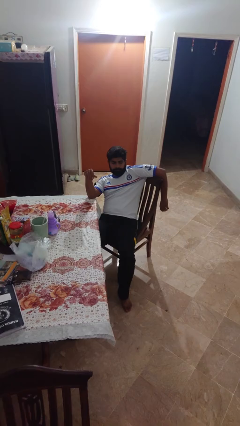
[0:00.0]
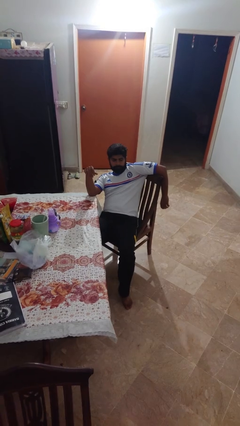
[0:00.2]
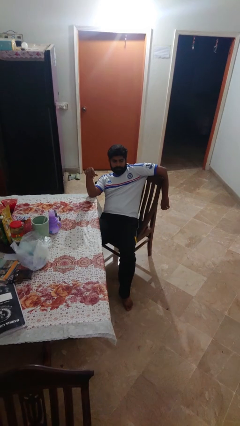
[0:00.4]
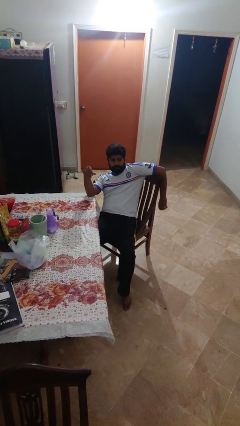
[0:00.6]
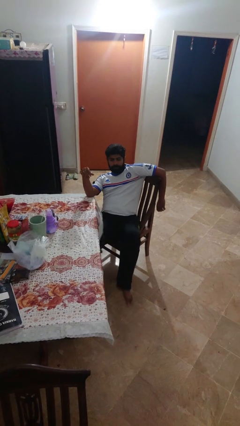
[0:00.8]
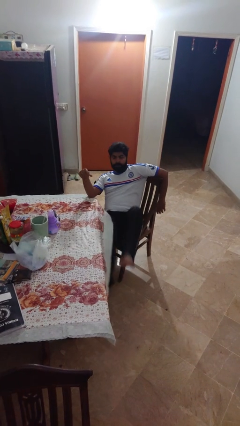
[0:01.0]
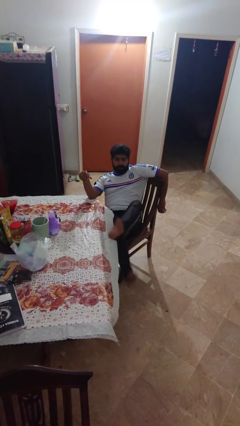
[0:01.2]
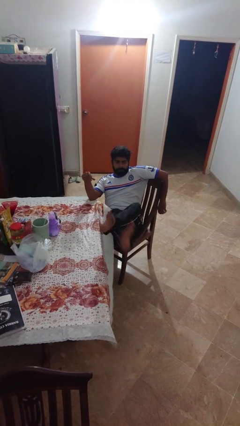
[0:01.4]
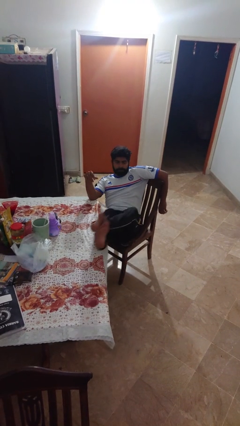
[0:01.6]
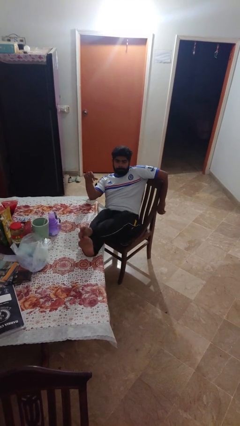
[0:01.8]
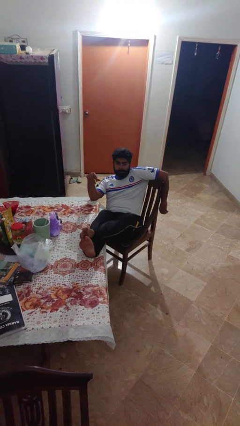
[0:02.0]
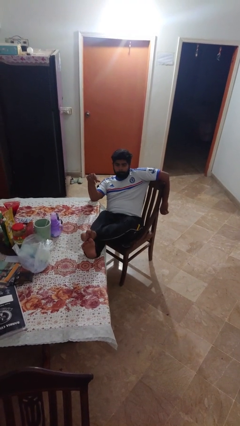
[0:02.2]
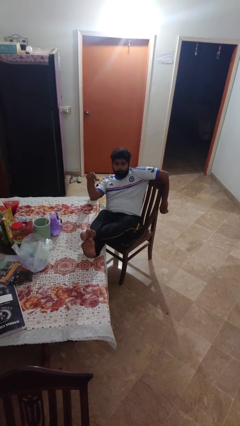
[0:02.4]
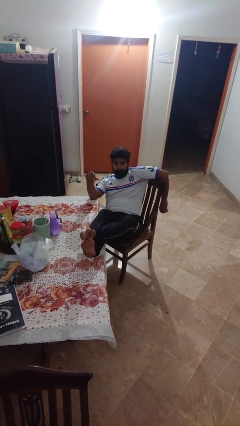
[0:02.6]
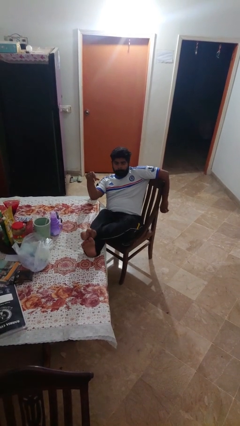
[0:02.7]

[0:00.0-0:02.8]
person puts feet up

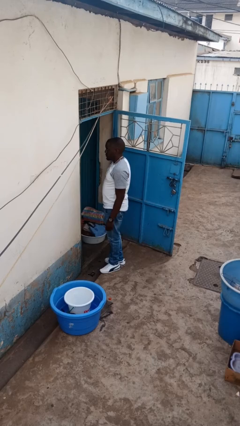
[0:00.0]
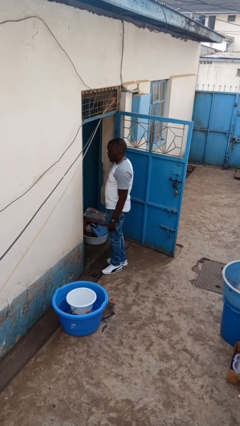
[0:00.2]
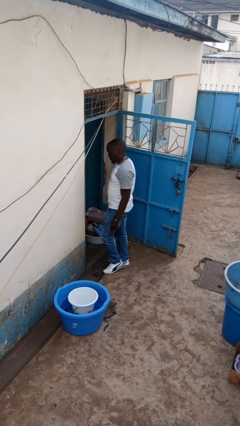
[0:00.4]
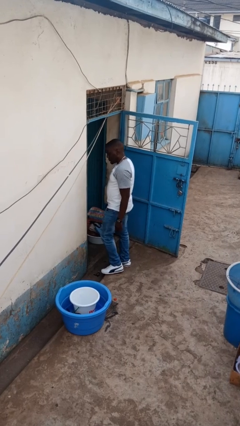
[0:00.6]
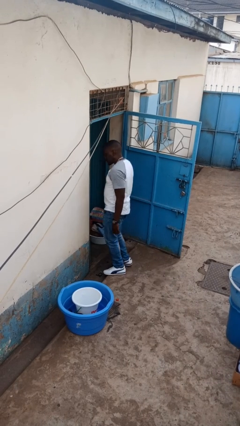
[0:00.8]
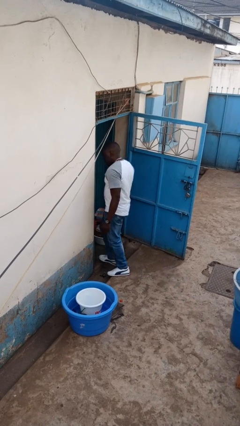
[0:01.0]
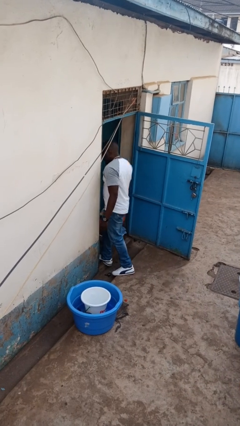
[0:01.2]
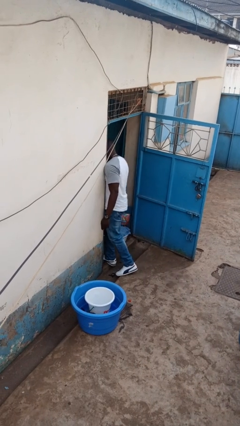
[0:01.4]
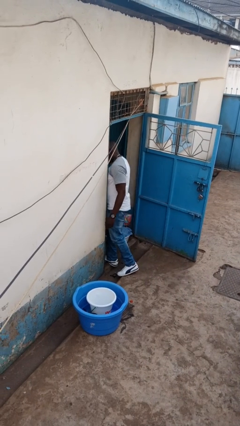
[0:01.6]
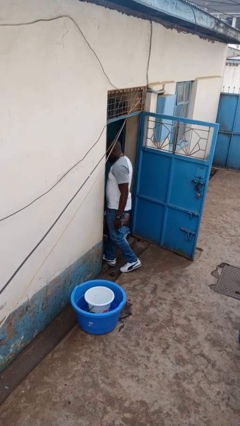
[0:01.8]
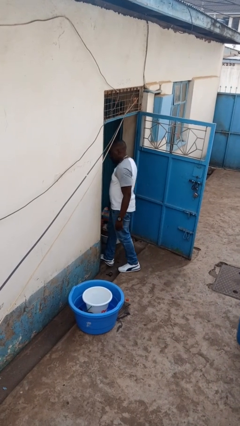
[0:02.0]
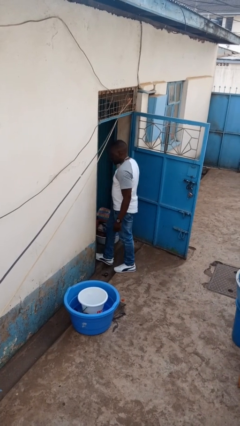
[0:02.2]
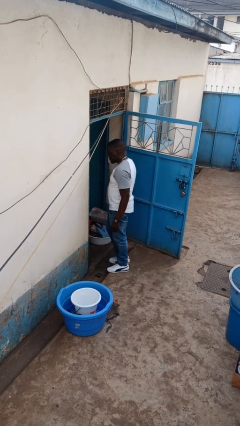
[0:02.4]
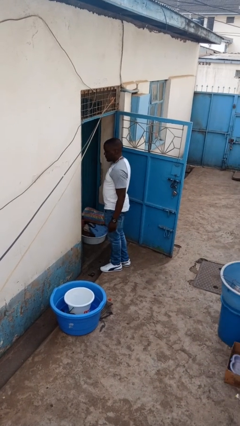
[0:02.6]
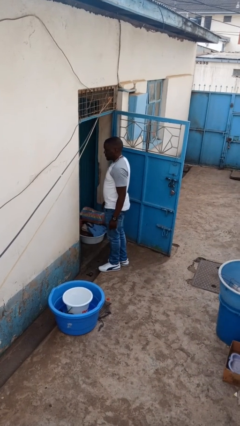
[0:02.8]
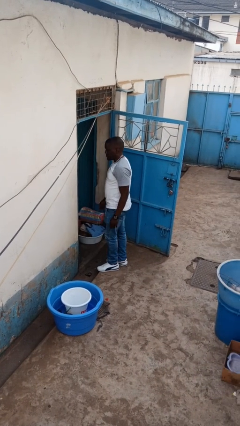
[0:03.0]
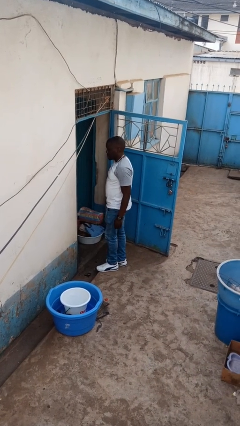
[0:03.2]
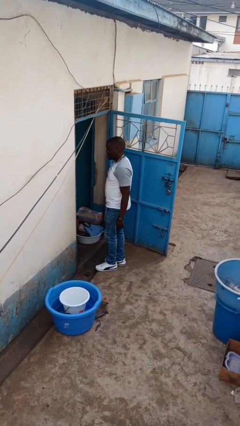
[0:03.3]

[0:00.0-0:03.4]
person bumps into wall

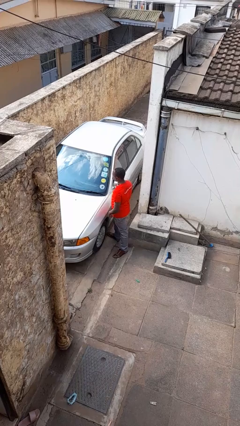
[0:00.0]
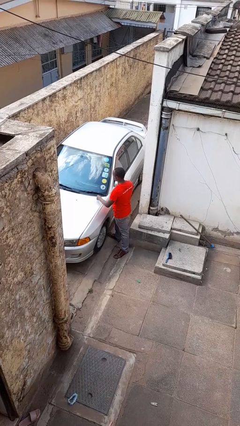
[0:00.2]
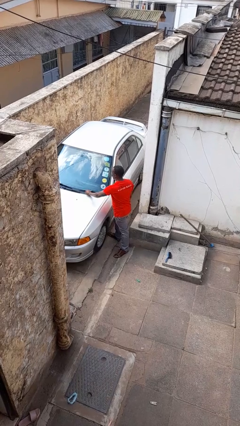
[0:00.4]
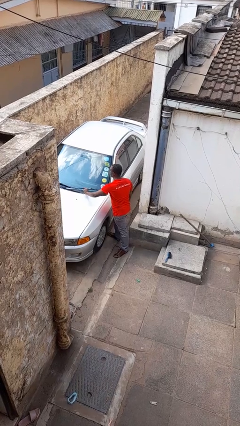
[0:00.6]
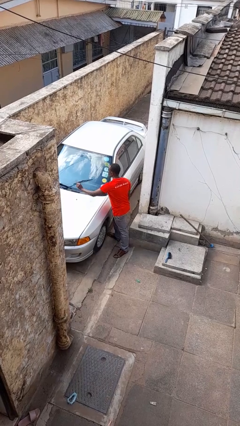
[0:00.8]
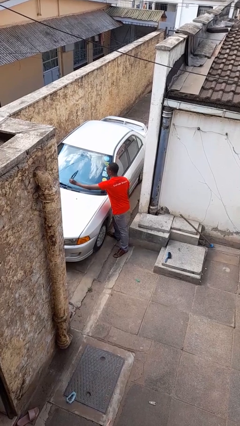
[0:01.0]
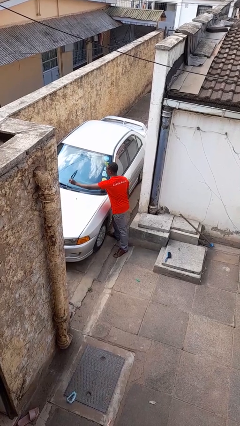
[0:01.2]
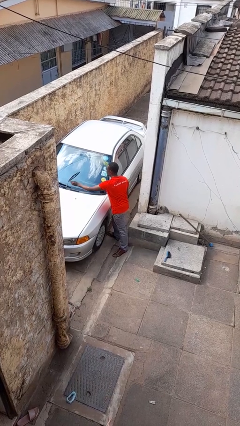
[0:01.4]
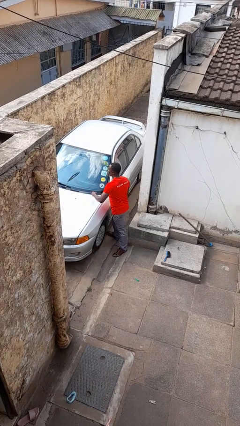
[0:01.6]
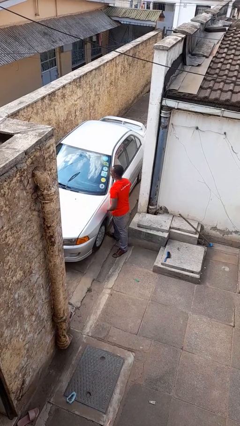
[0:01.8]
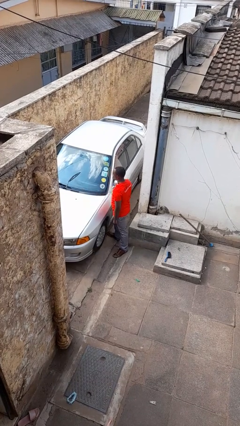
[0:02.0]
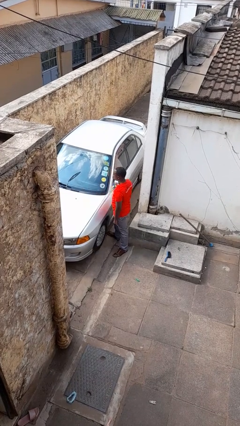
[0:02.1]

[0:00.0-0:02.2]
person flips up car wipers

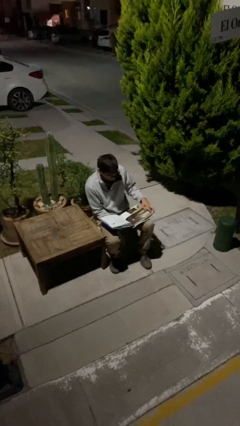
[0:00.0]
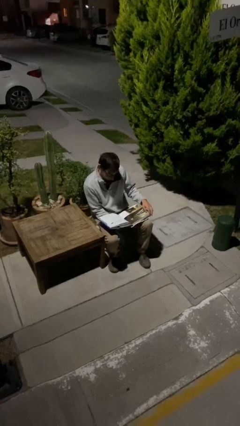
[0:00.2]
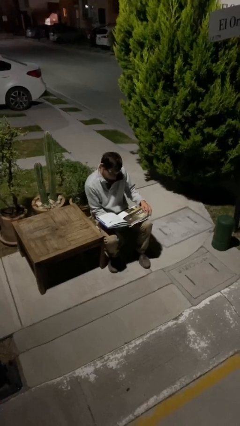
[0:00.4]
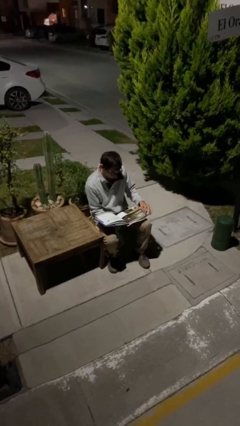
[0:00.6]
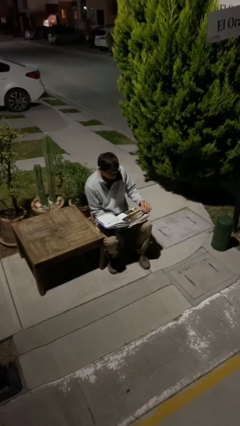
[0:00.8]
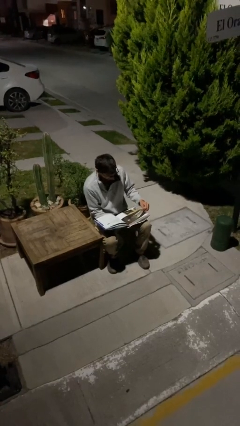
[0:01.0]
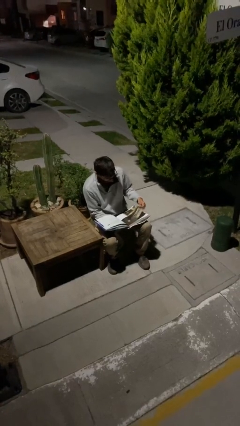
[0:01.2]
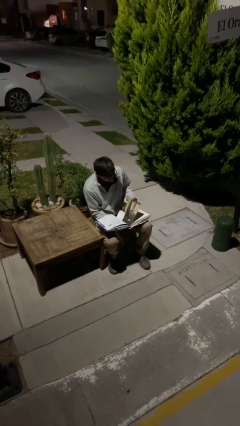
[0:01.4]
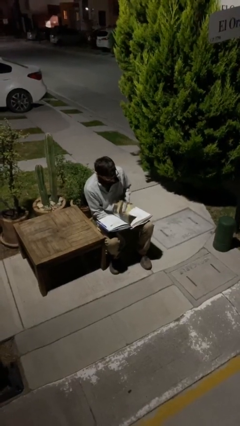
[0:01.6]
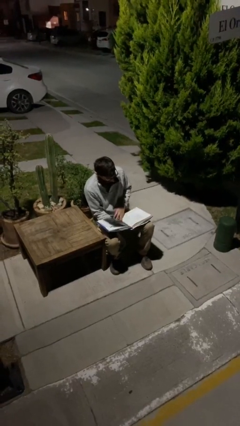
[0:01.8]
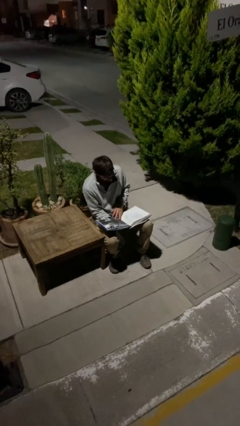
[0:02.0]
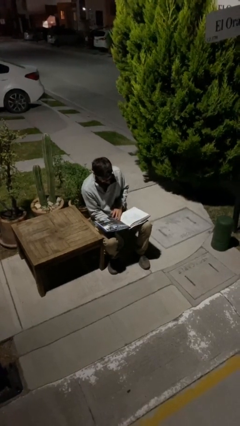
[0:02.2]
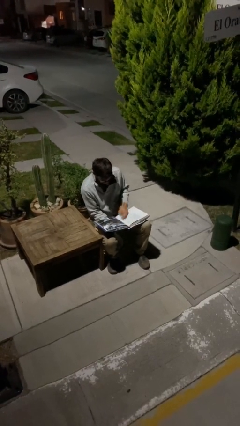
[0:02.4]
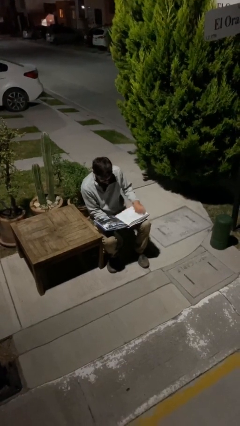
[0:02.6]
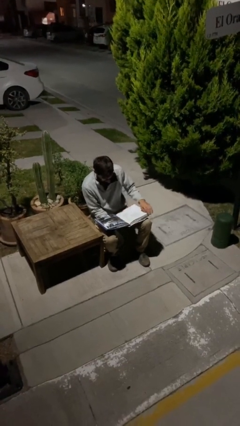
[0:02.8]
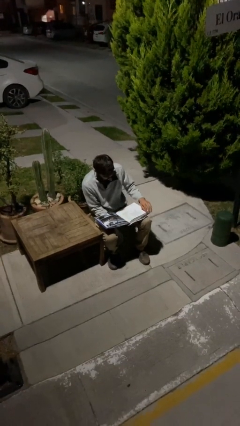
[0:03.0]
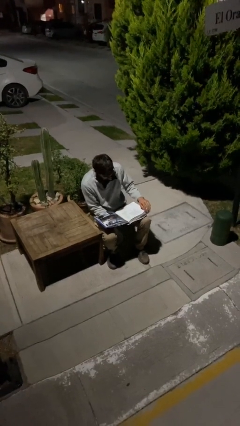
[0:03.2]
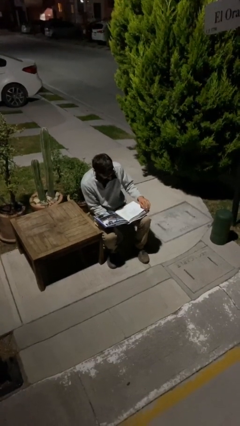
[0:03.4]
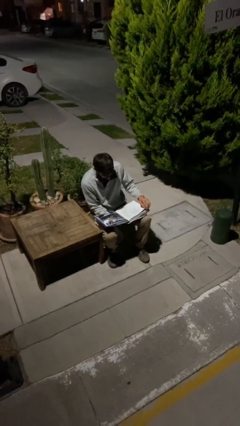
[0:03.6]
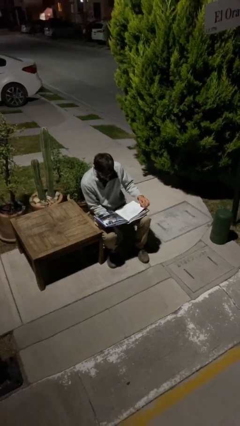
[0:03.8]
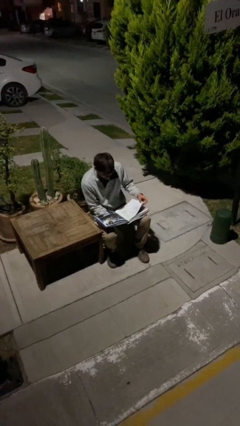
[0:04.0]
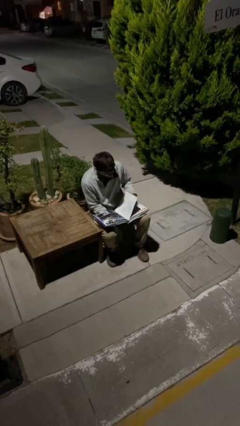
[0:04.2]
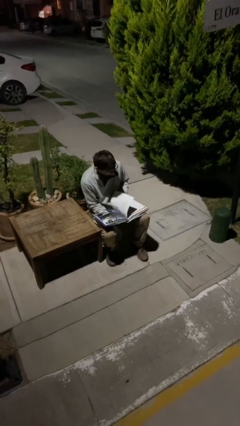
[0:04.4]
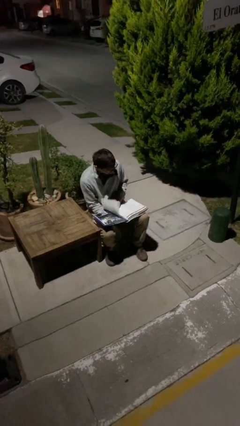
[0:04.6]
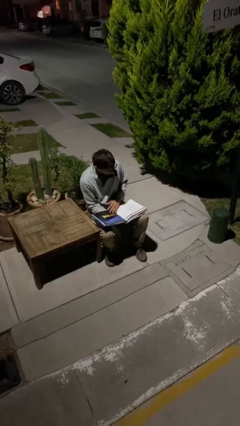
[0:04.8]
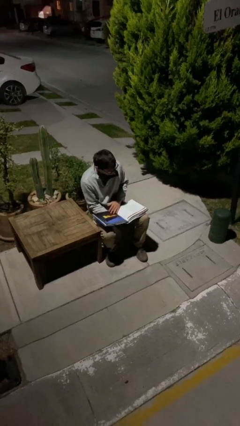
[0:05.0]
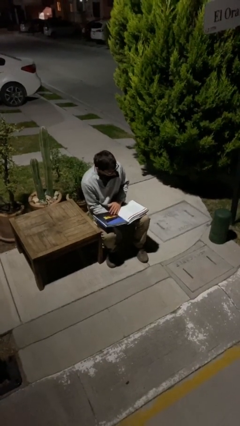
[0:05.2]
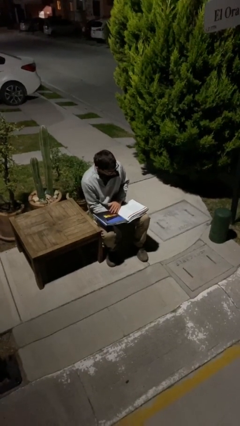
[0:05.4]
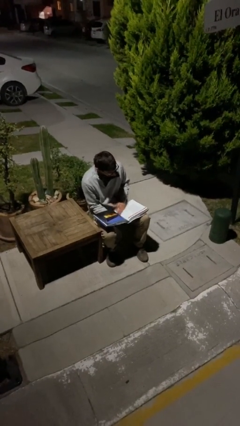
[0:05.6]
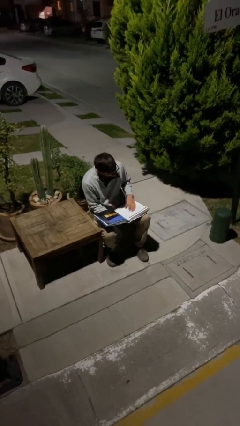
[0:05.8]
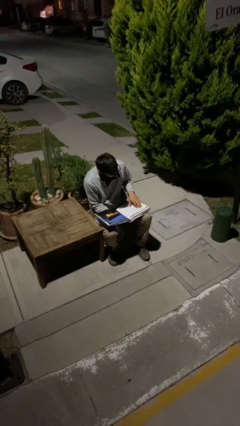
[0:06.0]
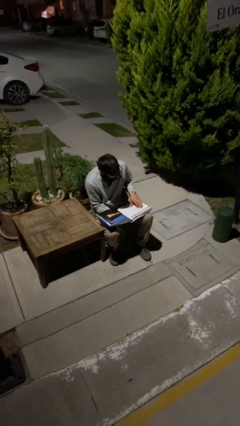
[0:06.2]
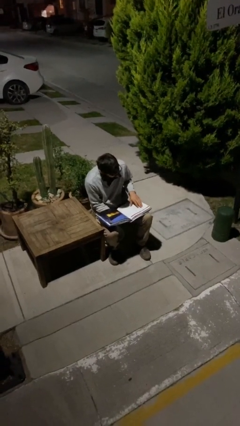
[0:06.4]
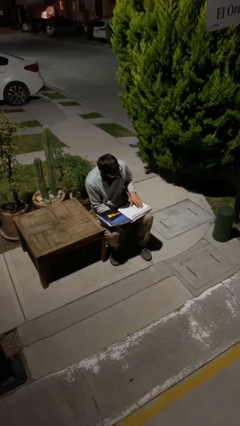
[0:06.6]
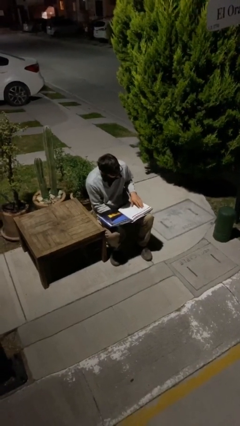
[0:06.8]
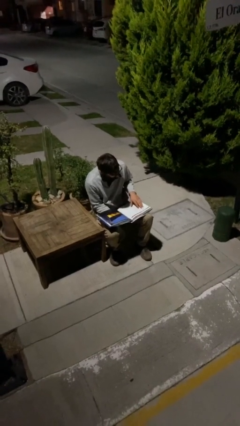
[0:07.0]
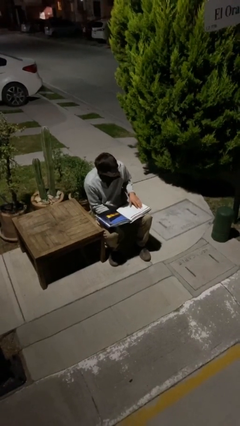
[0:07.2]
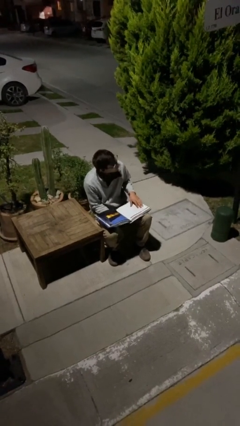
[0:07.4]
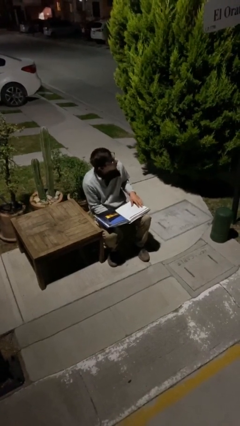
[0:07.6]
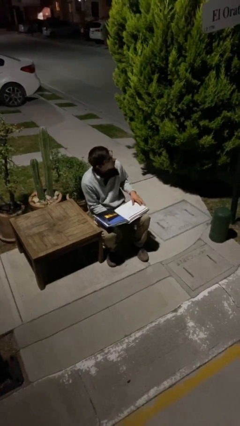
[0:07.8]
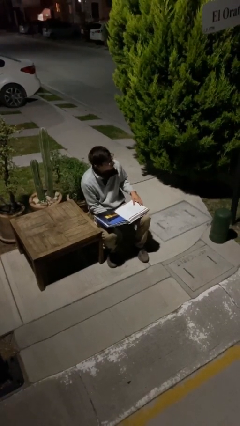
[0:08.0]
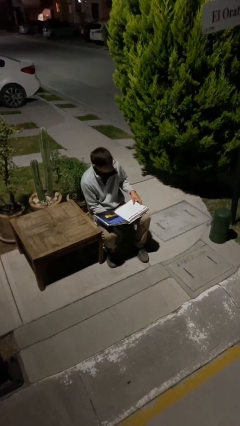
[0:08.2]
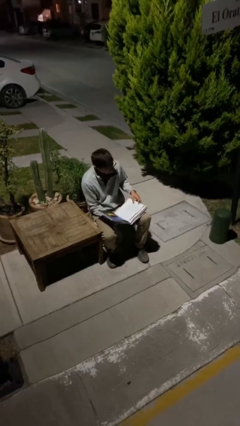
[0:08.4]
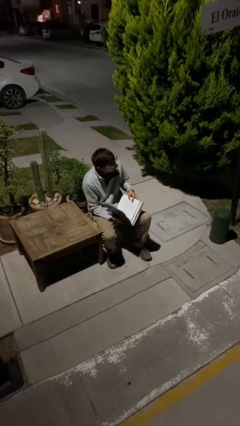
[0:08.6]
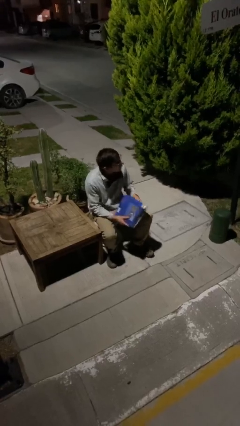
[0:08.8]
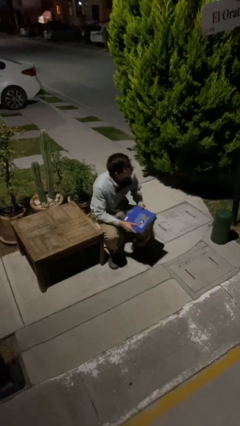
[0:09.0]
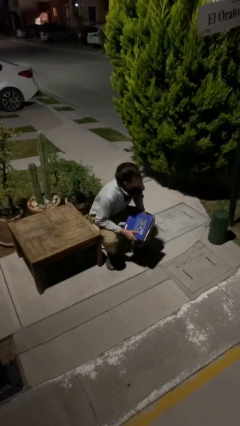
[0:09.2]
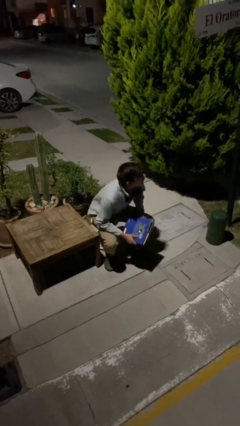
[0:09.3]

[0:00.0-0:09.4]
person reads document
